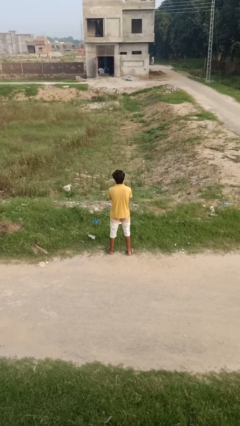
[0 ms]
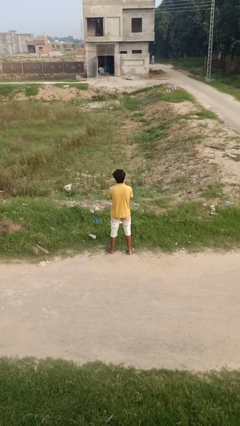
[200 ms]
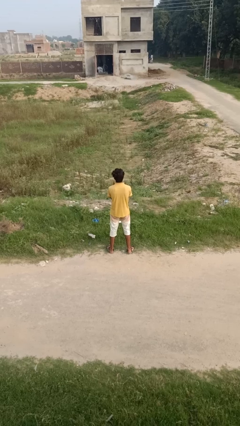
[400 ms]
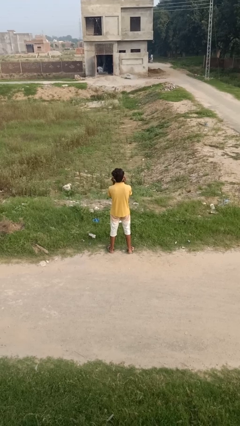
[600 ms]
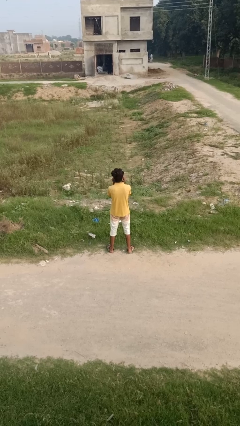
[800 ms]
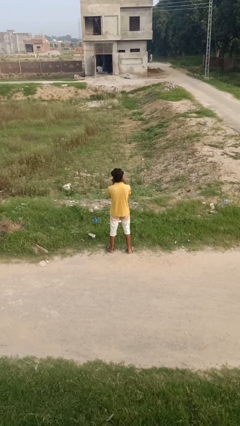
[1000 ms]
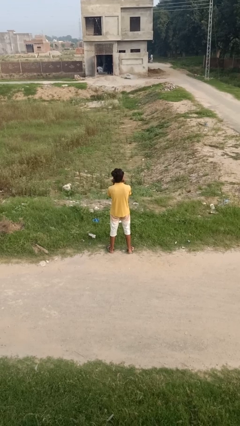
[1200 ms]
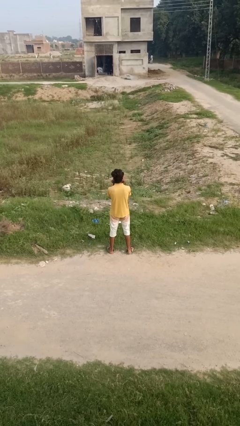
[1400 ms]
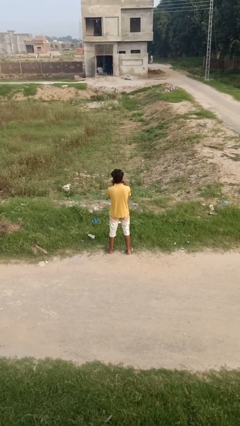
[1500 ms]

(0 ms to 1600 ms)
person touches earlobe

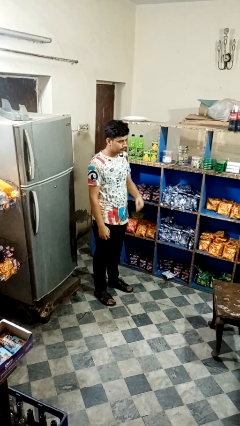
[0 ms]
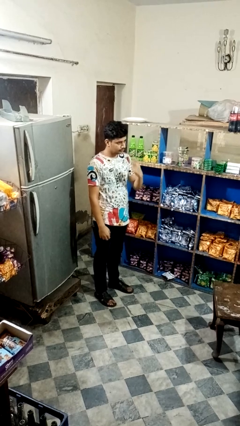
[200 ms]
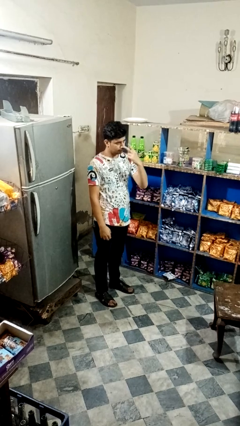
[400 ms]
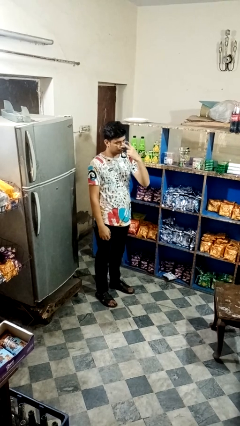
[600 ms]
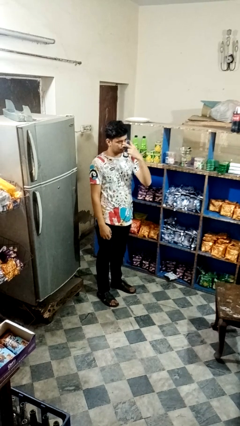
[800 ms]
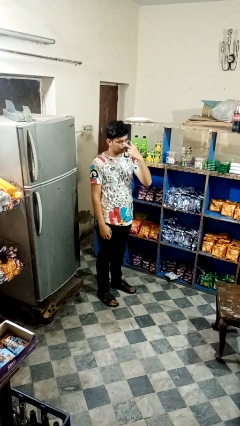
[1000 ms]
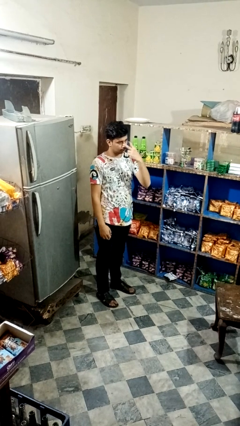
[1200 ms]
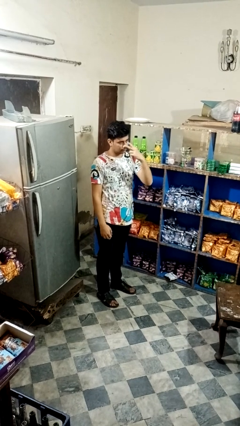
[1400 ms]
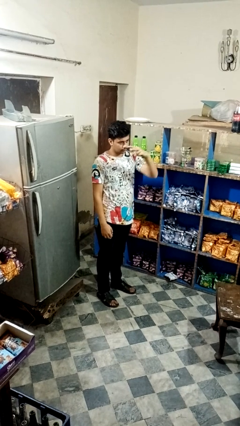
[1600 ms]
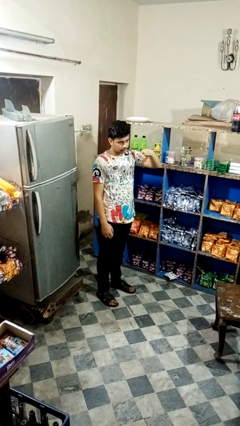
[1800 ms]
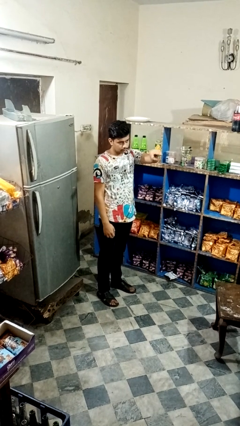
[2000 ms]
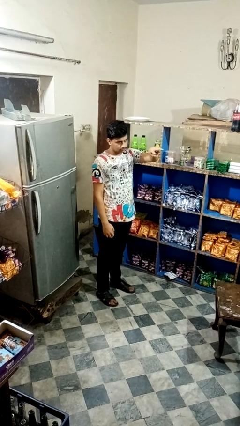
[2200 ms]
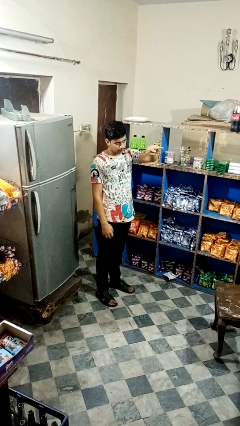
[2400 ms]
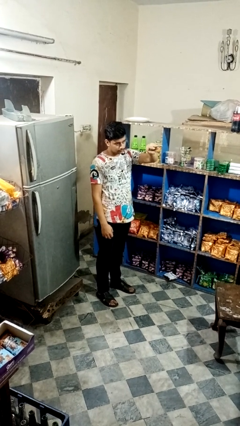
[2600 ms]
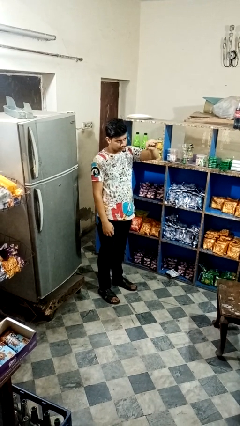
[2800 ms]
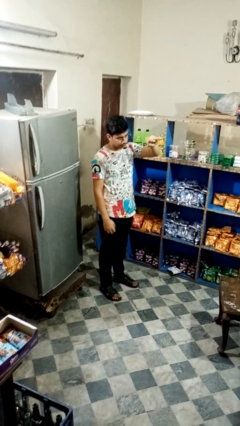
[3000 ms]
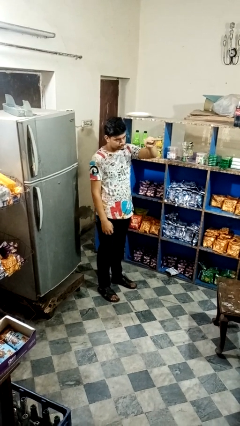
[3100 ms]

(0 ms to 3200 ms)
person gestures watch closely

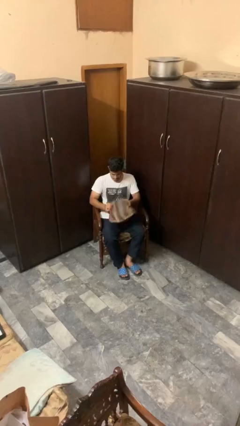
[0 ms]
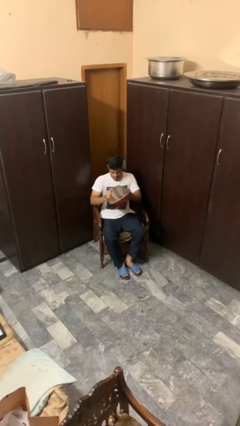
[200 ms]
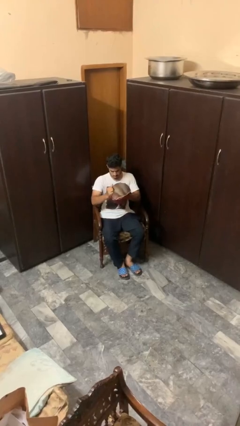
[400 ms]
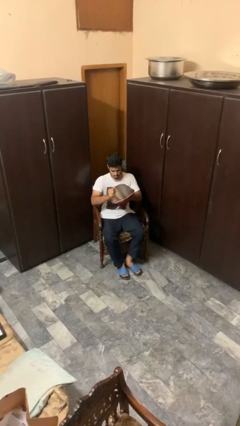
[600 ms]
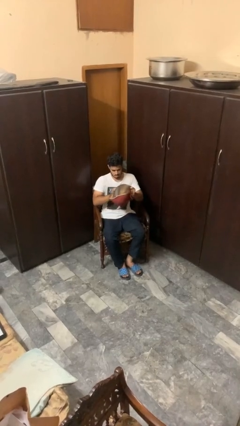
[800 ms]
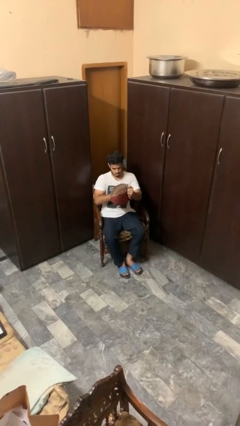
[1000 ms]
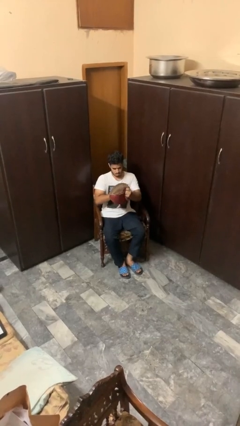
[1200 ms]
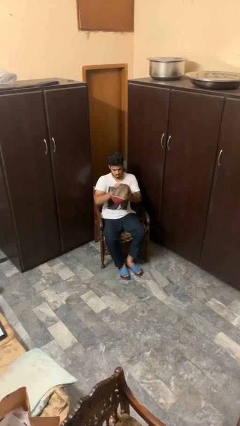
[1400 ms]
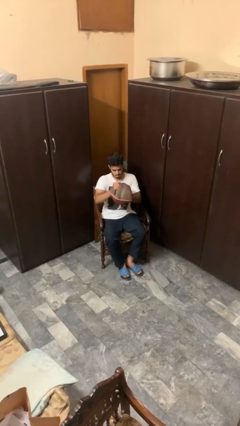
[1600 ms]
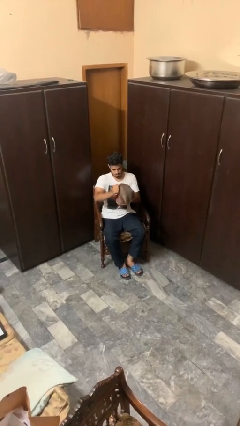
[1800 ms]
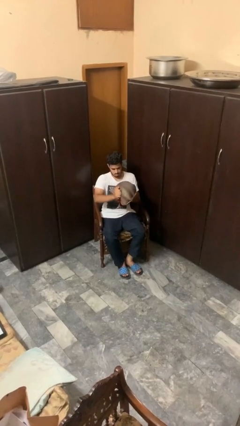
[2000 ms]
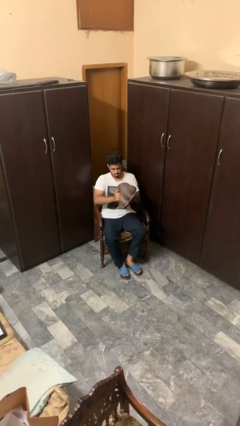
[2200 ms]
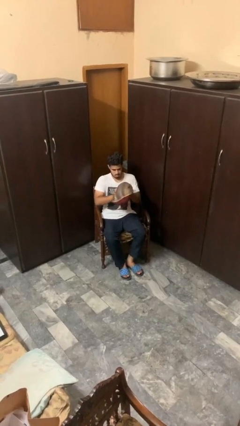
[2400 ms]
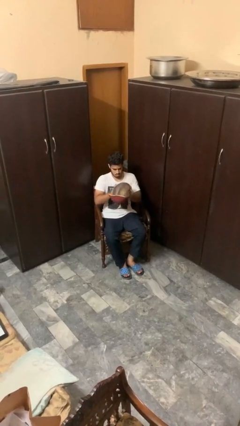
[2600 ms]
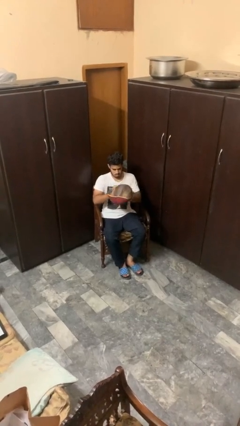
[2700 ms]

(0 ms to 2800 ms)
person squeezes object

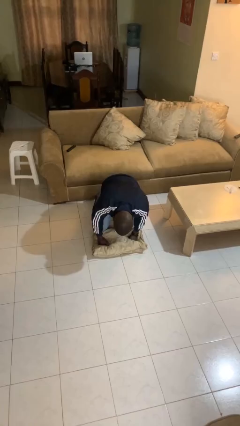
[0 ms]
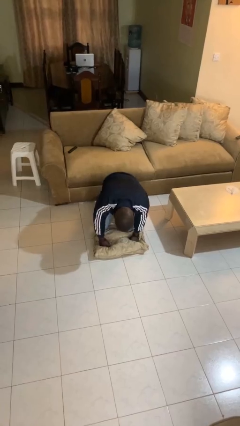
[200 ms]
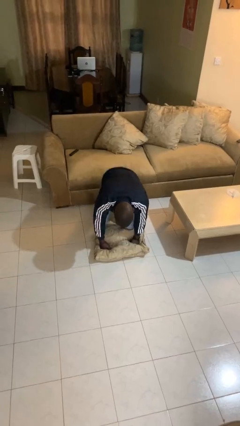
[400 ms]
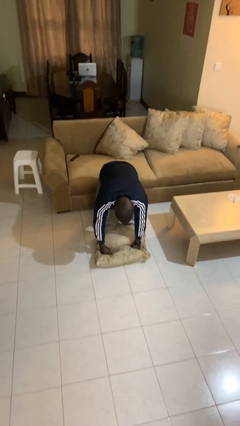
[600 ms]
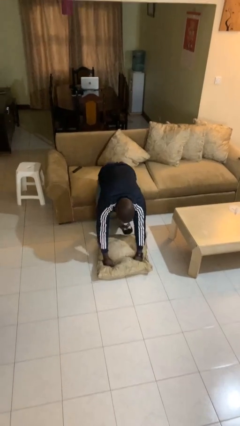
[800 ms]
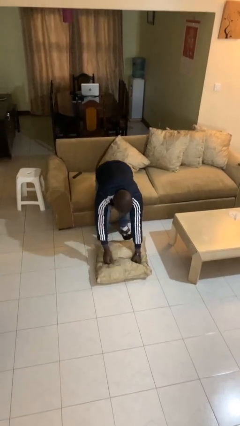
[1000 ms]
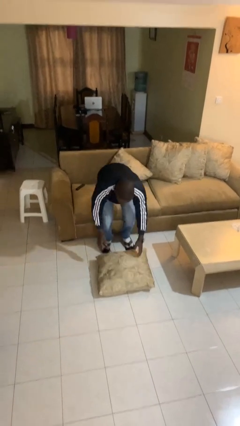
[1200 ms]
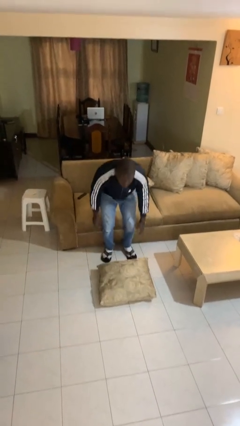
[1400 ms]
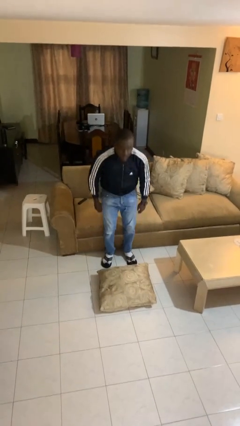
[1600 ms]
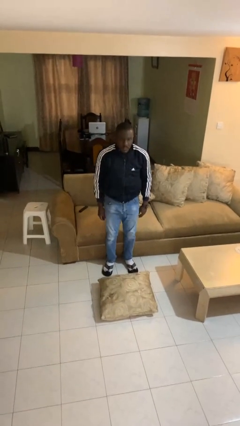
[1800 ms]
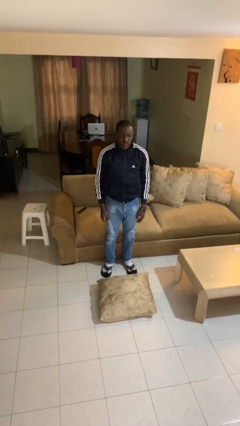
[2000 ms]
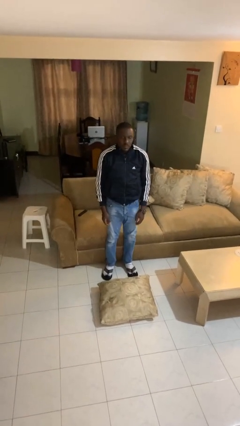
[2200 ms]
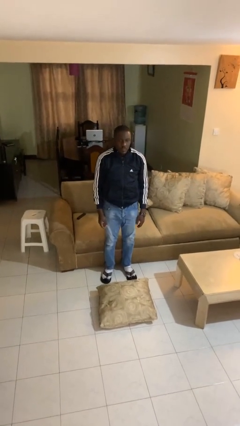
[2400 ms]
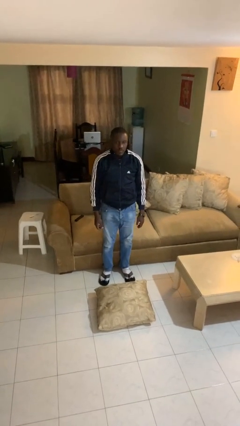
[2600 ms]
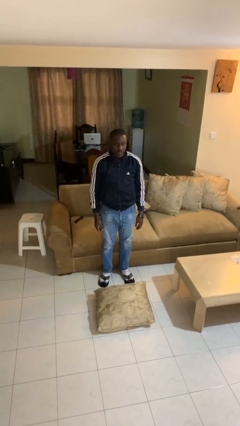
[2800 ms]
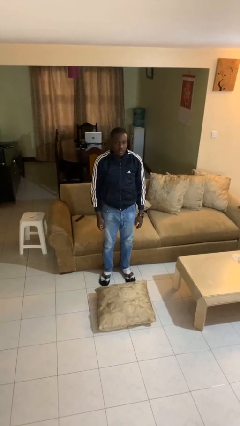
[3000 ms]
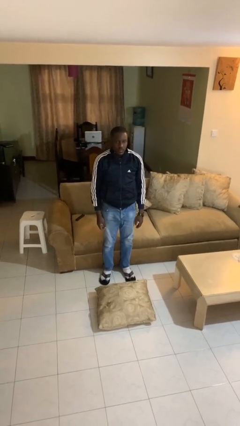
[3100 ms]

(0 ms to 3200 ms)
person stands up from floor

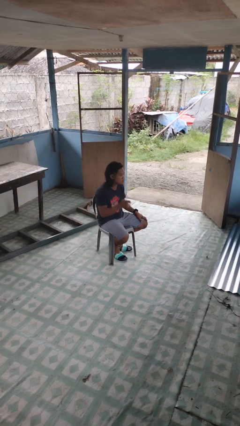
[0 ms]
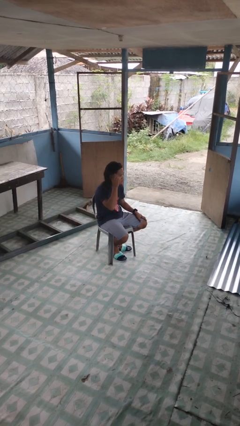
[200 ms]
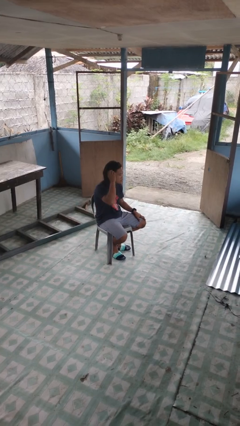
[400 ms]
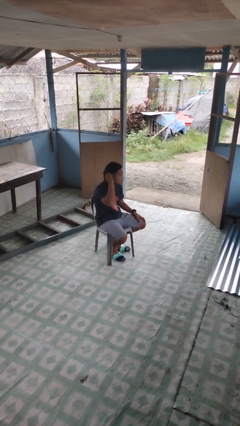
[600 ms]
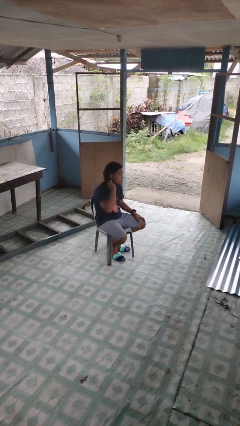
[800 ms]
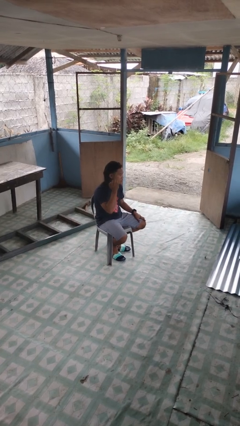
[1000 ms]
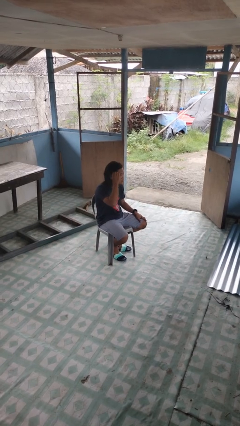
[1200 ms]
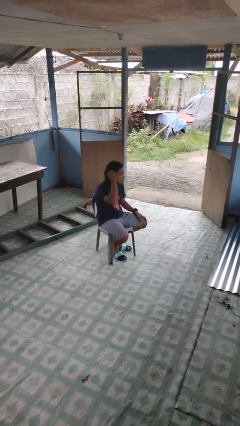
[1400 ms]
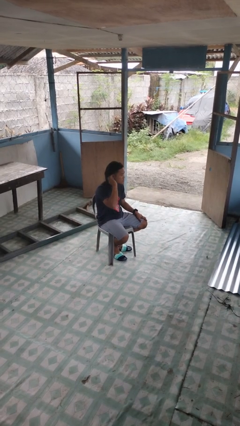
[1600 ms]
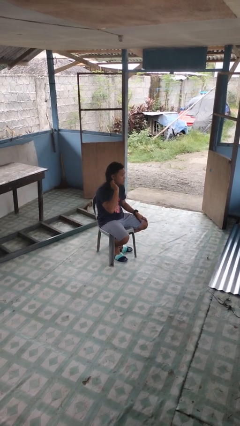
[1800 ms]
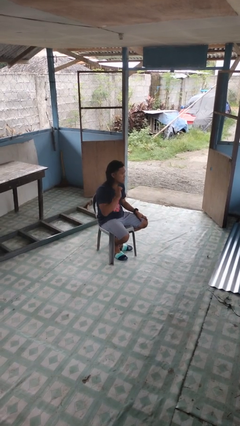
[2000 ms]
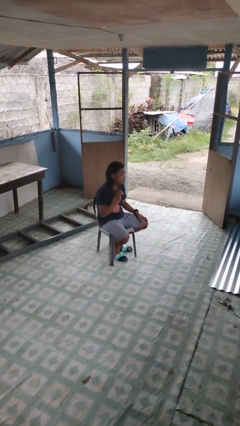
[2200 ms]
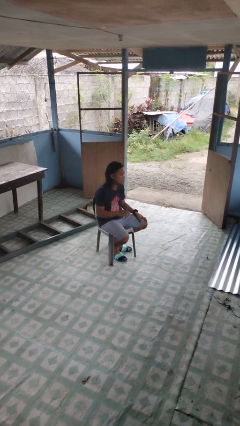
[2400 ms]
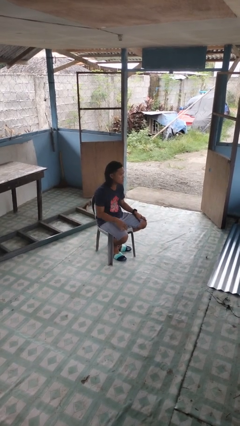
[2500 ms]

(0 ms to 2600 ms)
person strokes hair

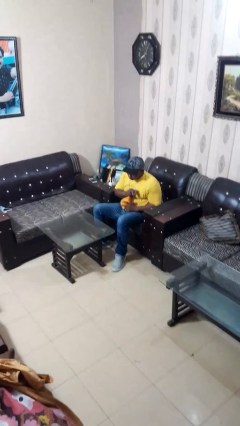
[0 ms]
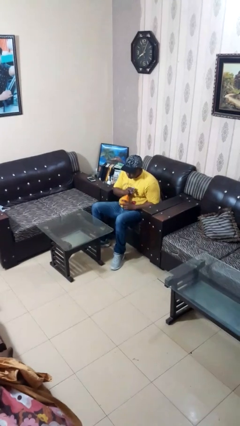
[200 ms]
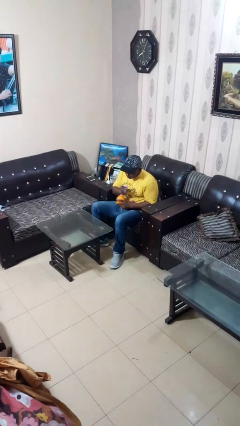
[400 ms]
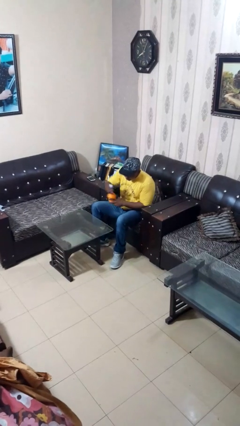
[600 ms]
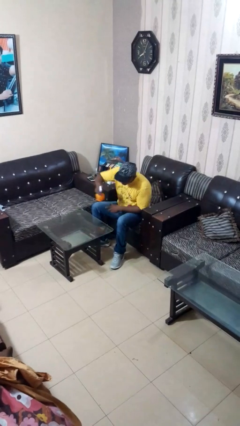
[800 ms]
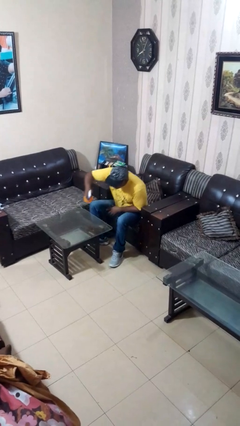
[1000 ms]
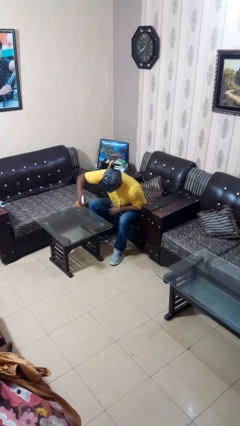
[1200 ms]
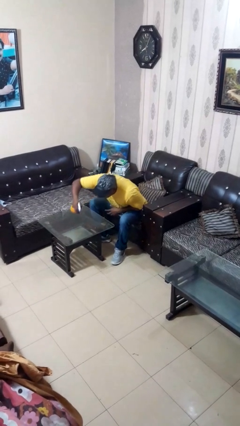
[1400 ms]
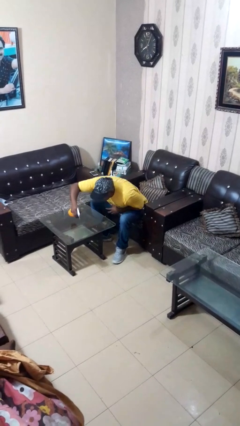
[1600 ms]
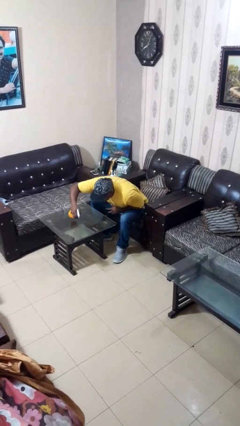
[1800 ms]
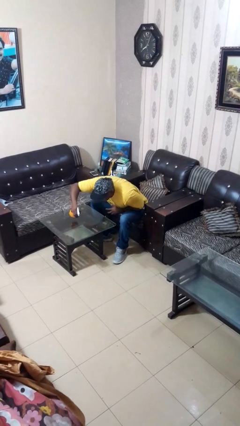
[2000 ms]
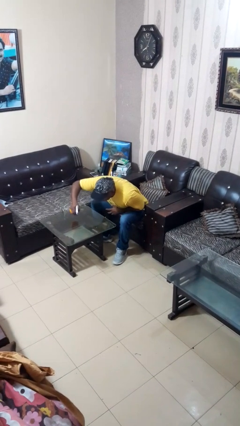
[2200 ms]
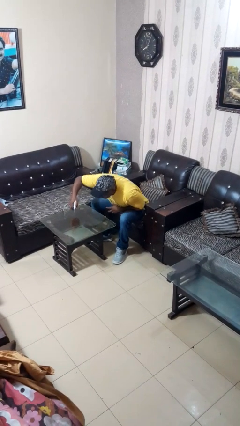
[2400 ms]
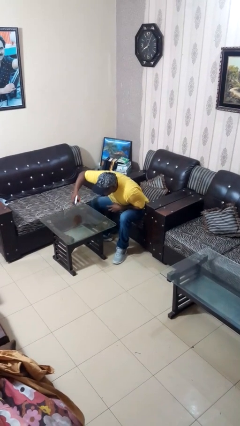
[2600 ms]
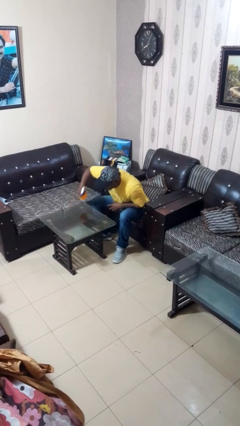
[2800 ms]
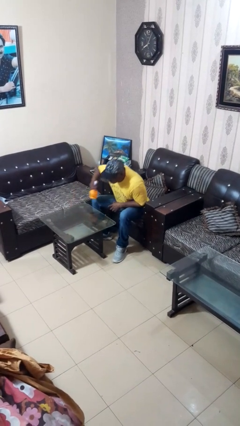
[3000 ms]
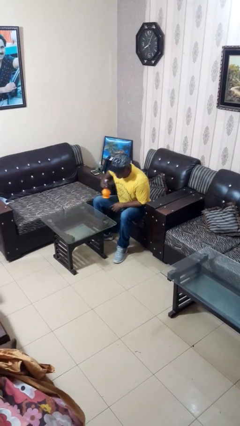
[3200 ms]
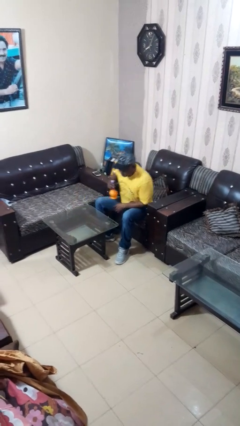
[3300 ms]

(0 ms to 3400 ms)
person sprays from bottle

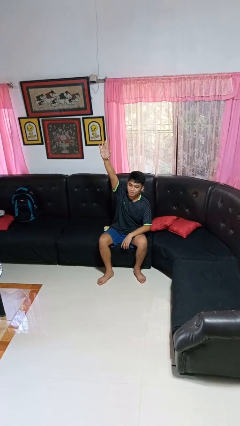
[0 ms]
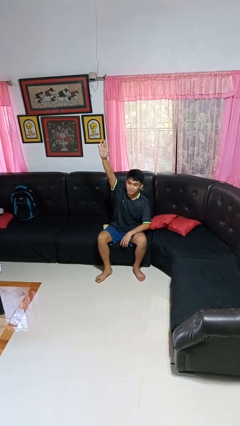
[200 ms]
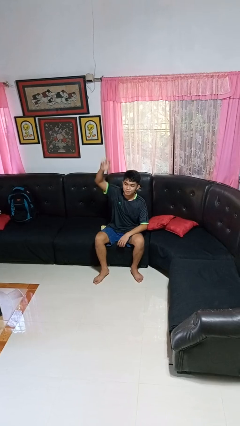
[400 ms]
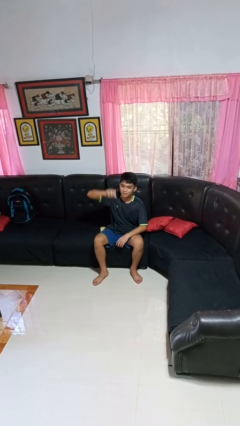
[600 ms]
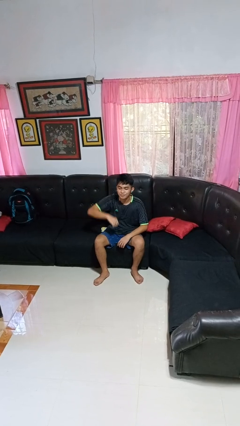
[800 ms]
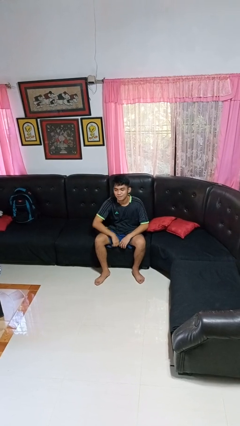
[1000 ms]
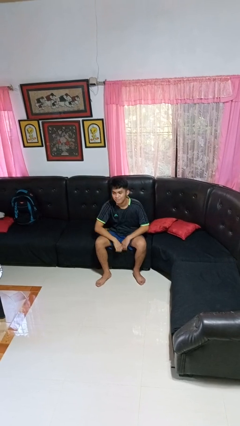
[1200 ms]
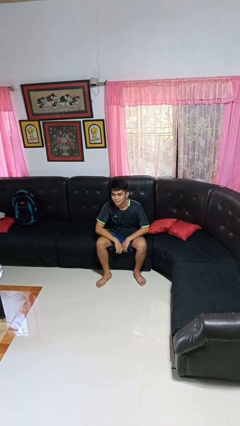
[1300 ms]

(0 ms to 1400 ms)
person gestures lower hand
